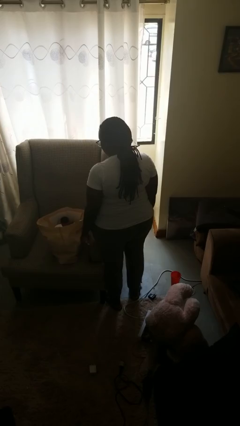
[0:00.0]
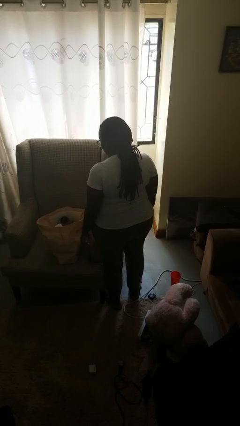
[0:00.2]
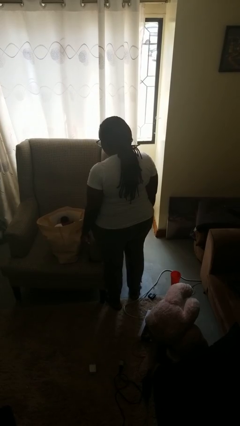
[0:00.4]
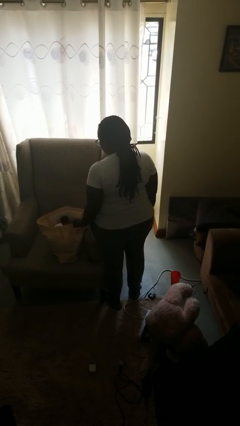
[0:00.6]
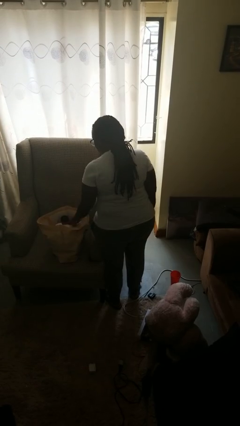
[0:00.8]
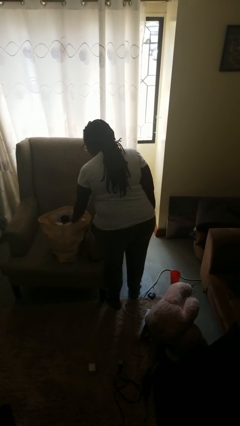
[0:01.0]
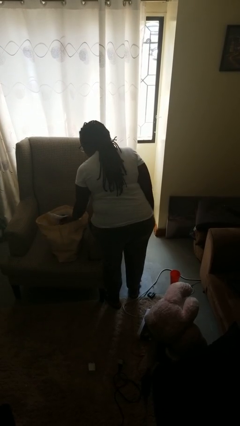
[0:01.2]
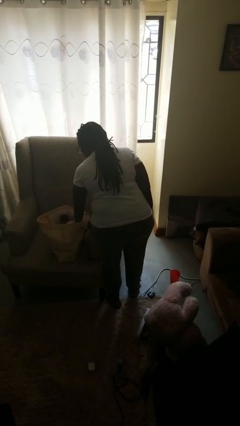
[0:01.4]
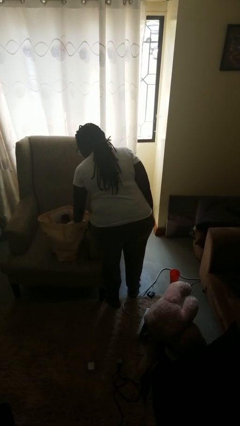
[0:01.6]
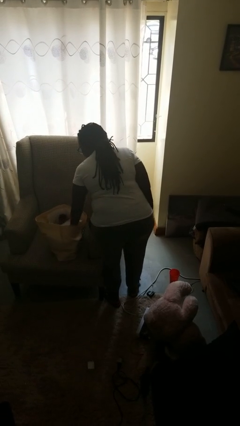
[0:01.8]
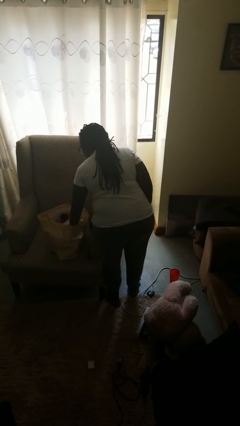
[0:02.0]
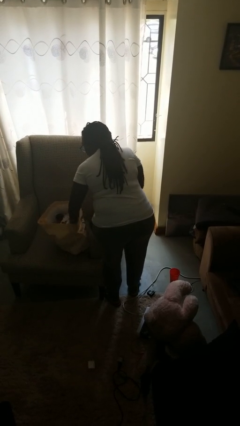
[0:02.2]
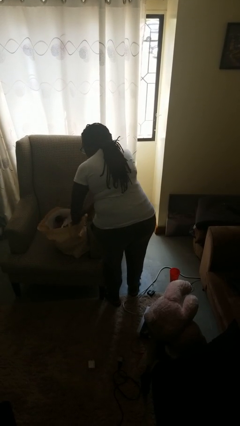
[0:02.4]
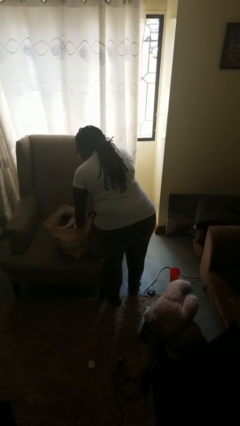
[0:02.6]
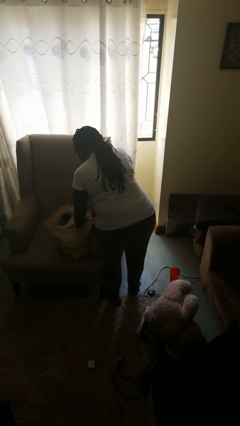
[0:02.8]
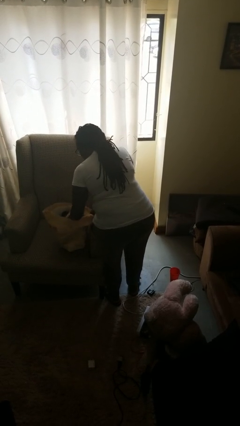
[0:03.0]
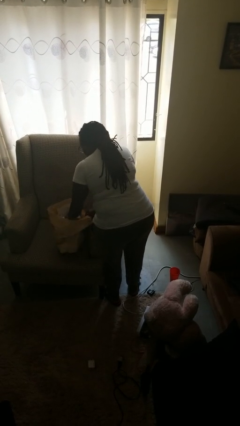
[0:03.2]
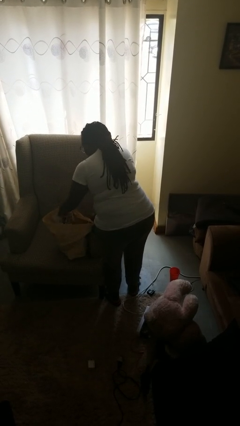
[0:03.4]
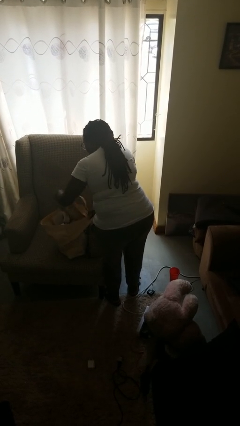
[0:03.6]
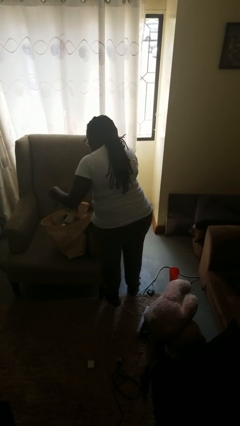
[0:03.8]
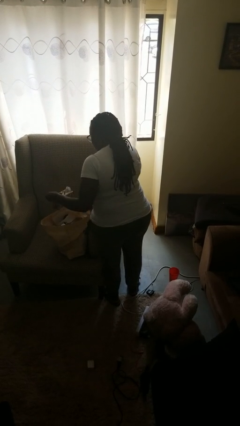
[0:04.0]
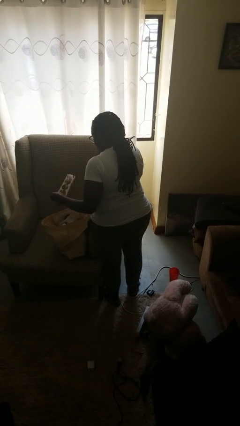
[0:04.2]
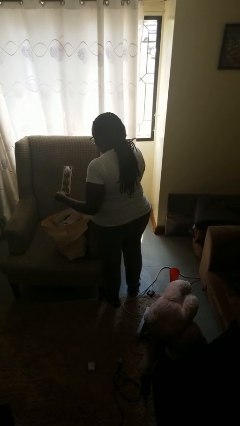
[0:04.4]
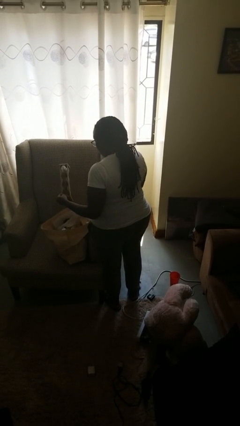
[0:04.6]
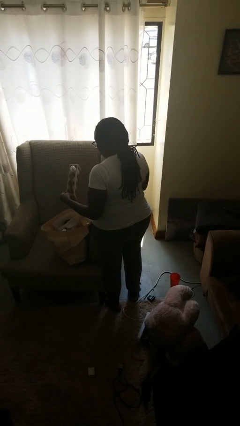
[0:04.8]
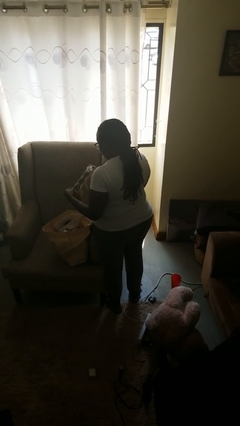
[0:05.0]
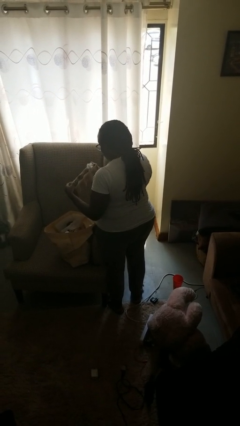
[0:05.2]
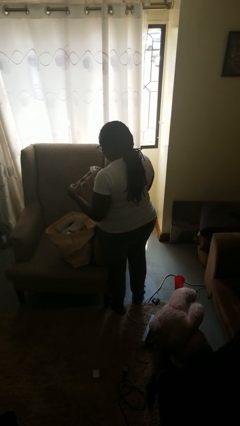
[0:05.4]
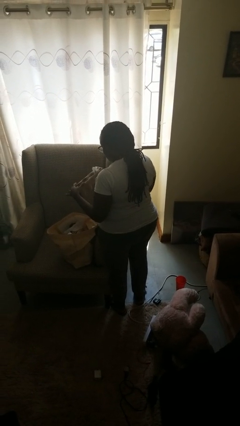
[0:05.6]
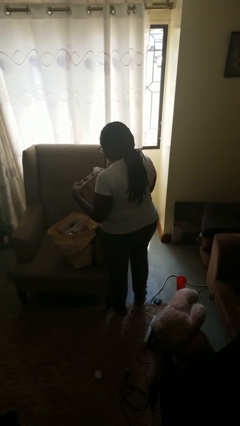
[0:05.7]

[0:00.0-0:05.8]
person takes object from bag

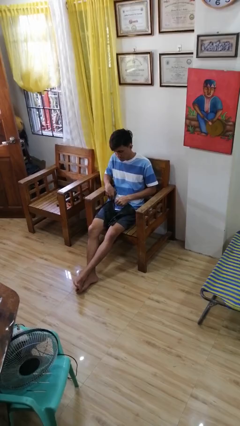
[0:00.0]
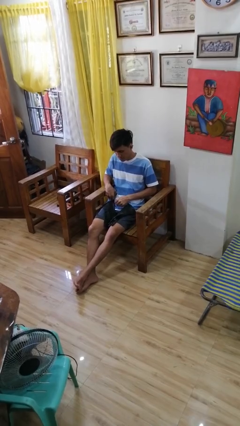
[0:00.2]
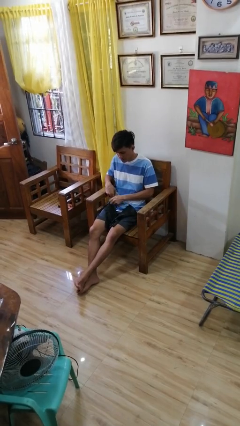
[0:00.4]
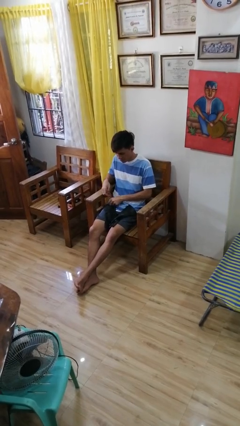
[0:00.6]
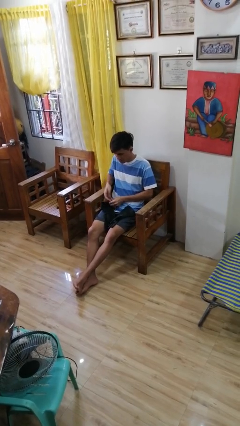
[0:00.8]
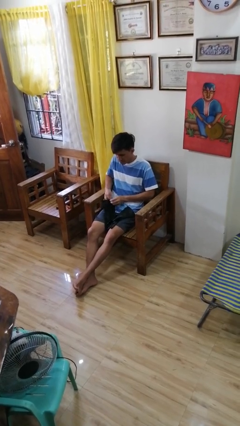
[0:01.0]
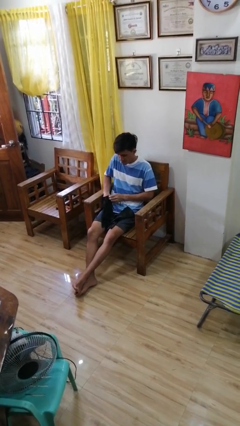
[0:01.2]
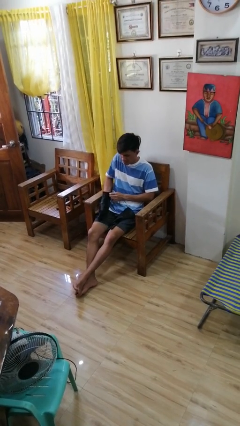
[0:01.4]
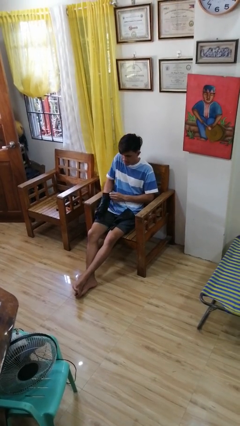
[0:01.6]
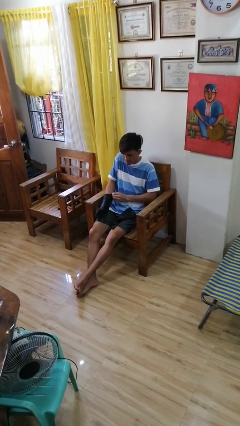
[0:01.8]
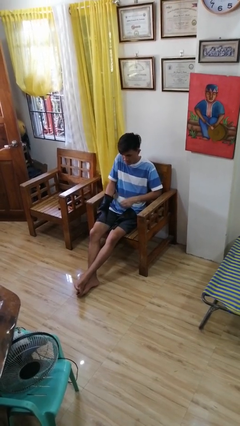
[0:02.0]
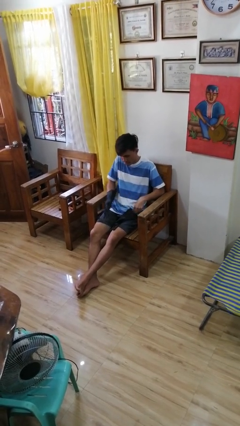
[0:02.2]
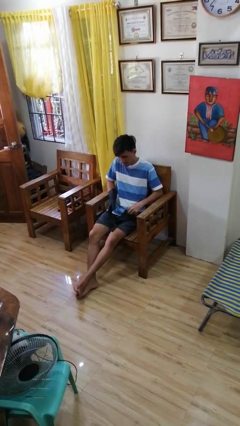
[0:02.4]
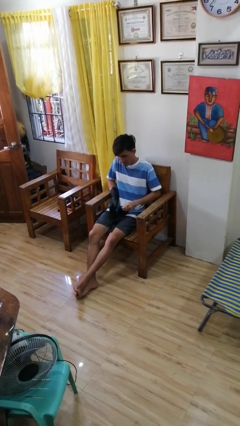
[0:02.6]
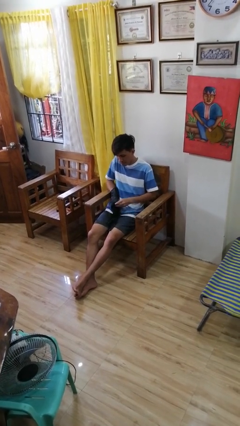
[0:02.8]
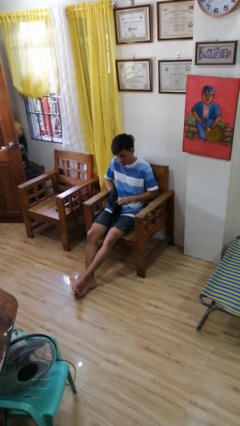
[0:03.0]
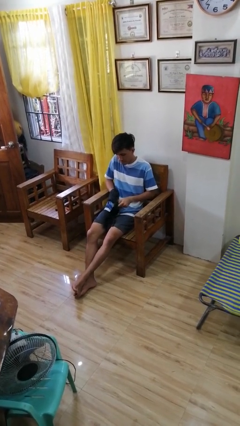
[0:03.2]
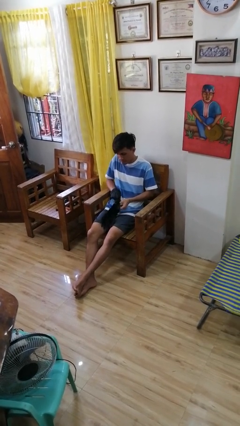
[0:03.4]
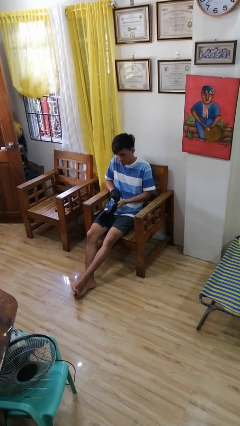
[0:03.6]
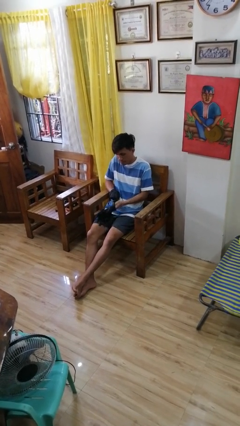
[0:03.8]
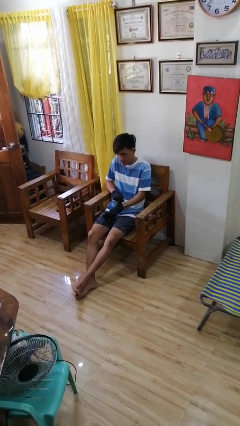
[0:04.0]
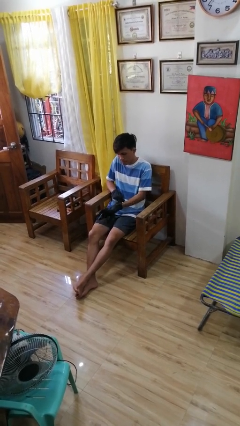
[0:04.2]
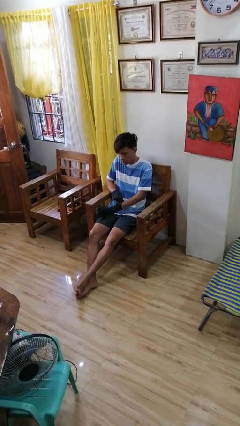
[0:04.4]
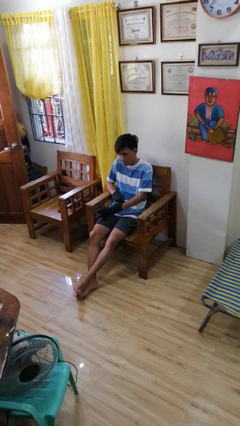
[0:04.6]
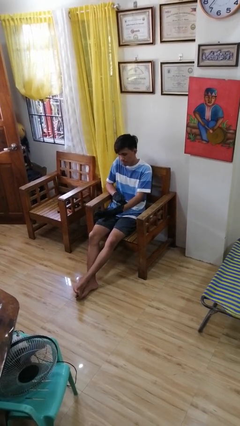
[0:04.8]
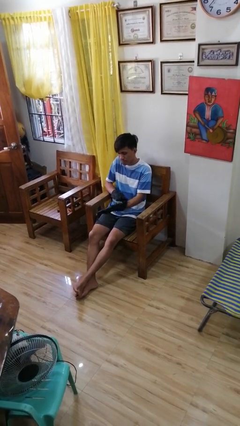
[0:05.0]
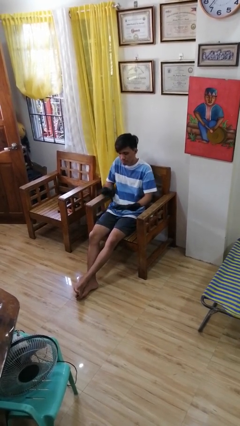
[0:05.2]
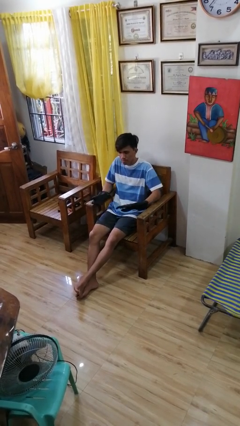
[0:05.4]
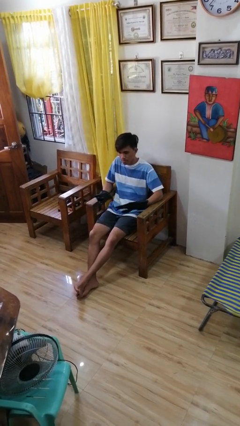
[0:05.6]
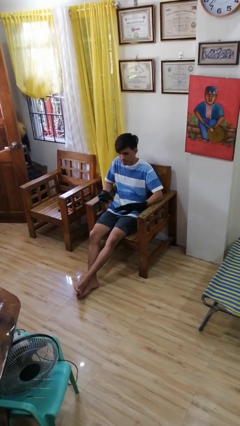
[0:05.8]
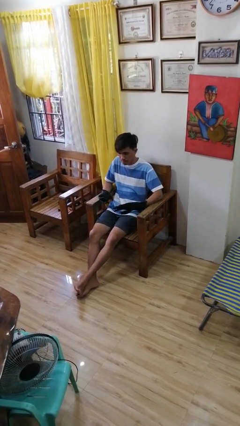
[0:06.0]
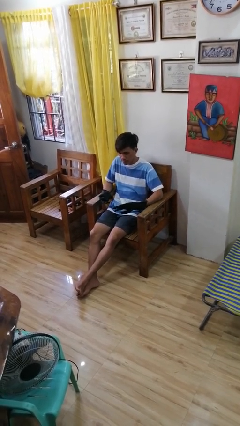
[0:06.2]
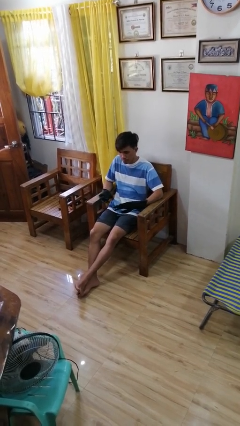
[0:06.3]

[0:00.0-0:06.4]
person puts on gloves

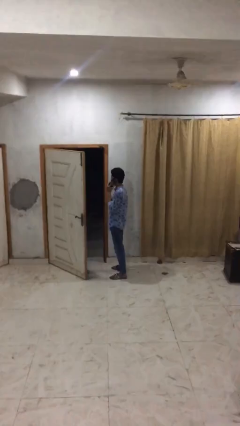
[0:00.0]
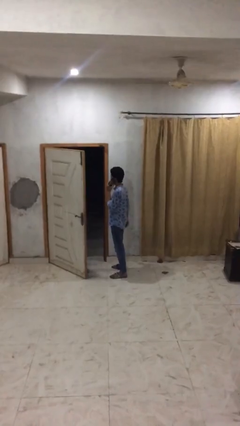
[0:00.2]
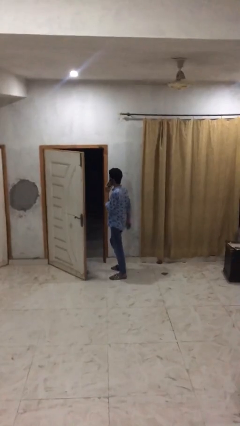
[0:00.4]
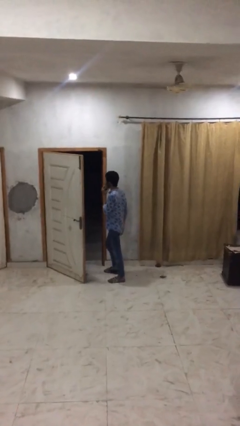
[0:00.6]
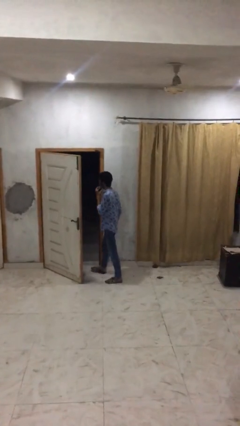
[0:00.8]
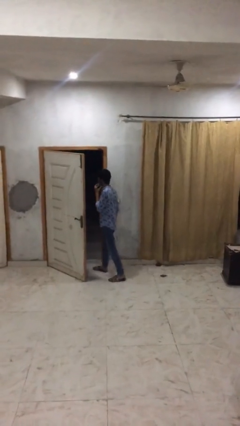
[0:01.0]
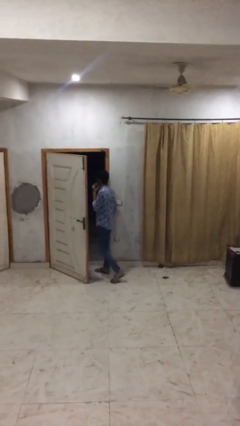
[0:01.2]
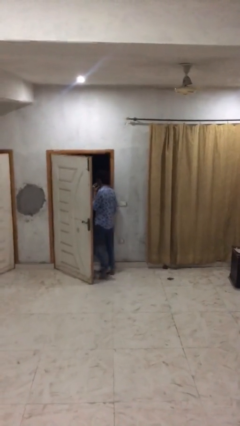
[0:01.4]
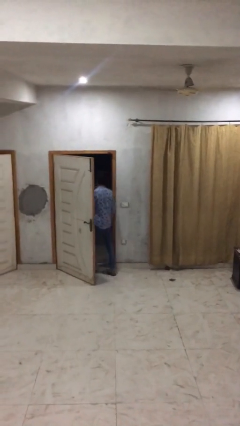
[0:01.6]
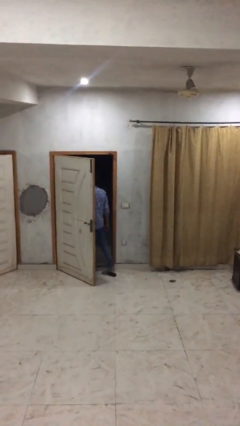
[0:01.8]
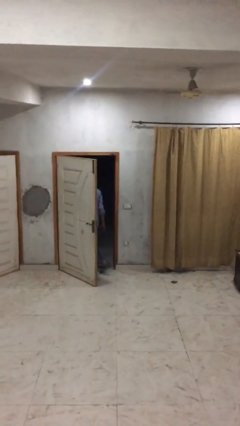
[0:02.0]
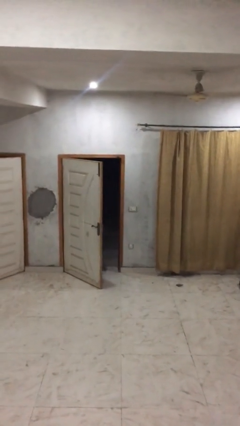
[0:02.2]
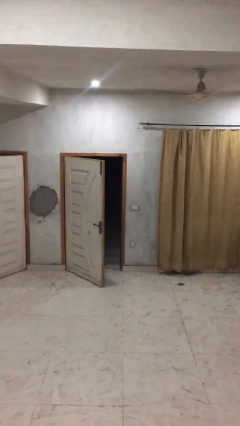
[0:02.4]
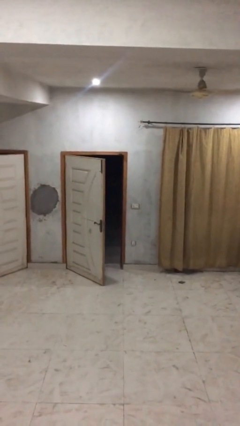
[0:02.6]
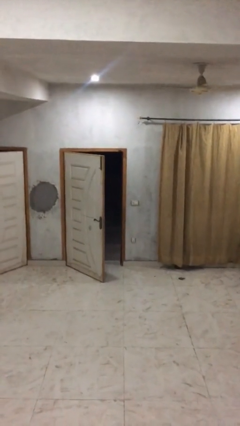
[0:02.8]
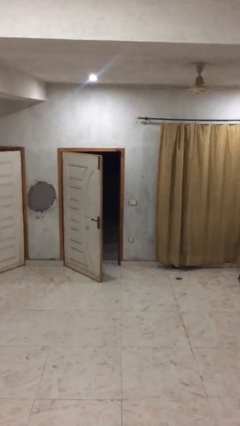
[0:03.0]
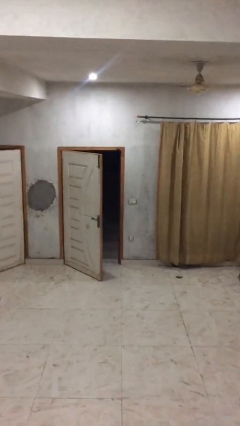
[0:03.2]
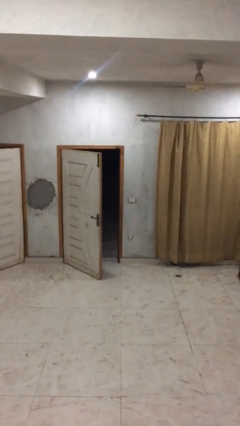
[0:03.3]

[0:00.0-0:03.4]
person exits scene through structure

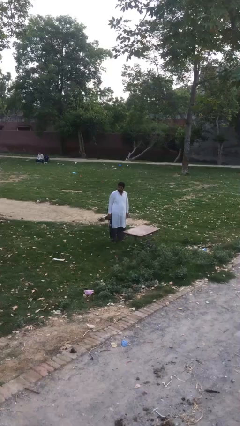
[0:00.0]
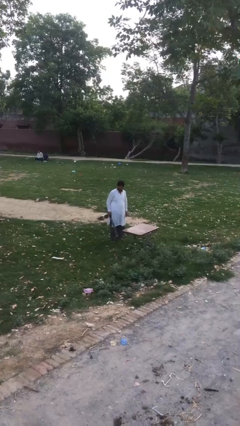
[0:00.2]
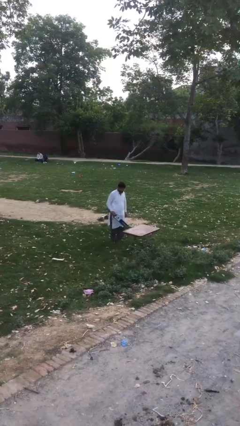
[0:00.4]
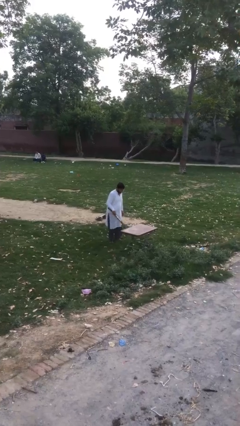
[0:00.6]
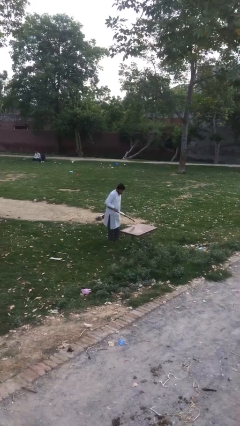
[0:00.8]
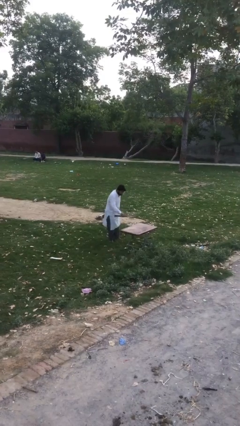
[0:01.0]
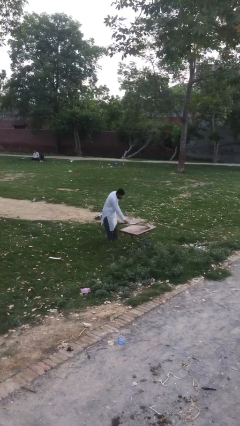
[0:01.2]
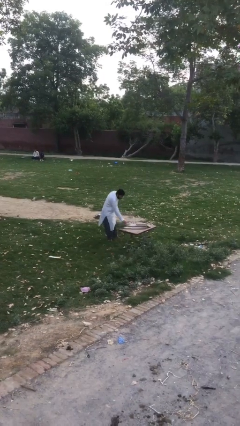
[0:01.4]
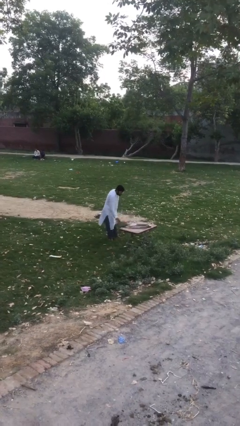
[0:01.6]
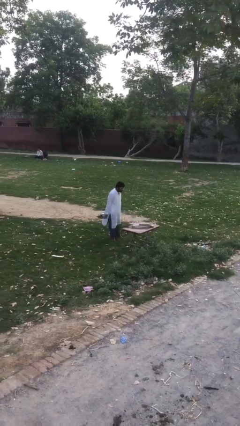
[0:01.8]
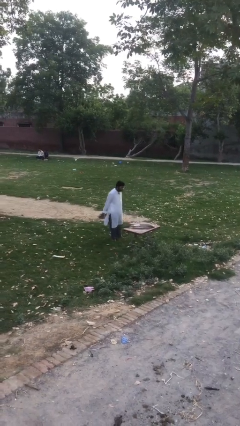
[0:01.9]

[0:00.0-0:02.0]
person puts down object on table

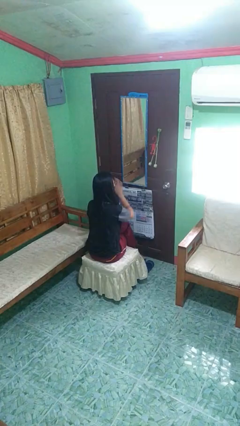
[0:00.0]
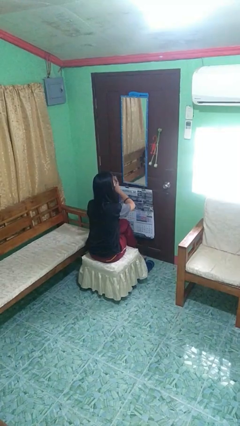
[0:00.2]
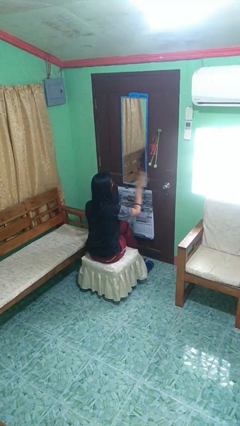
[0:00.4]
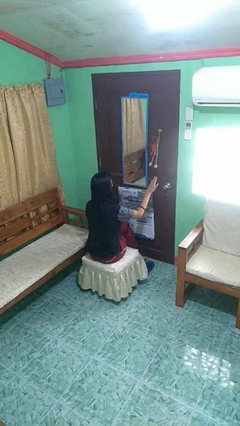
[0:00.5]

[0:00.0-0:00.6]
person gestures swipe left
